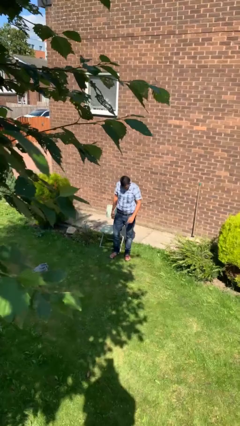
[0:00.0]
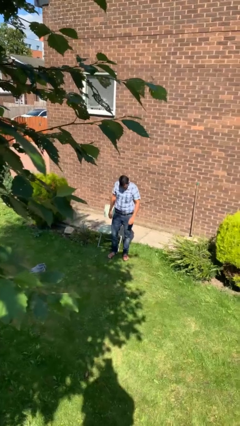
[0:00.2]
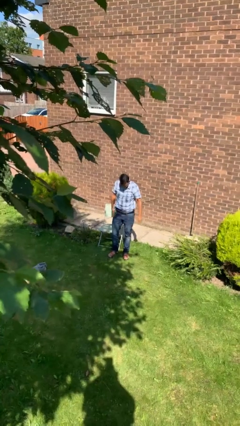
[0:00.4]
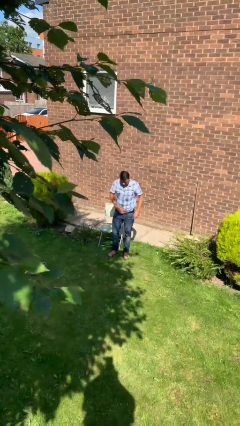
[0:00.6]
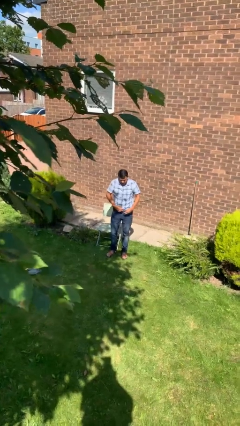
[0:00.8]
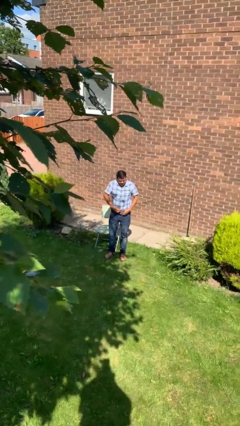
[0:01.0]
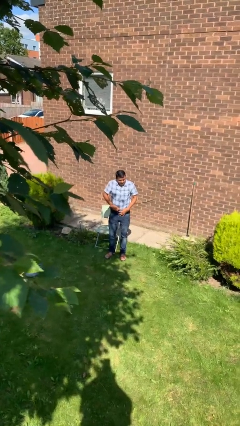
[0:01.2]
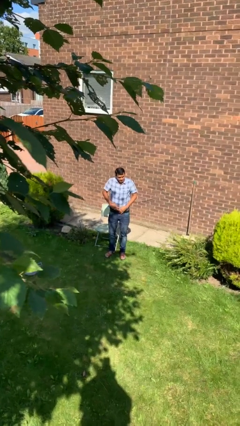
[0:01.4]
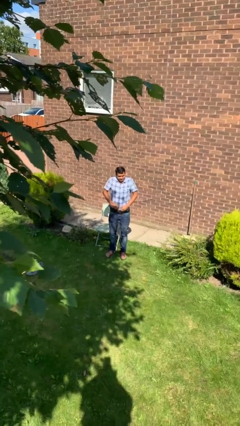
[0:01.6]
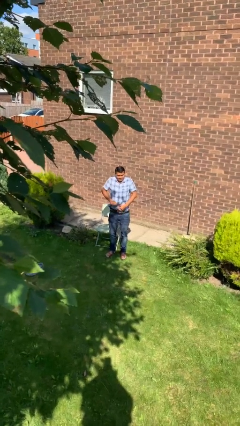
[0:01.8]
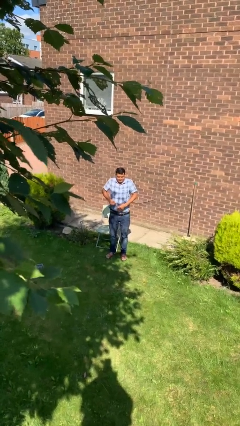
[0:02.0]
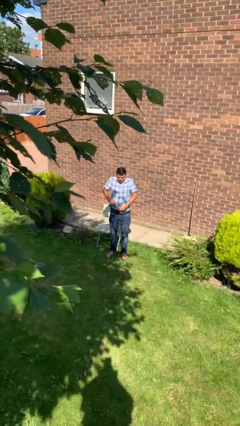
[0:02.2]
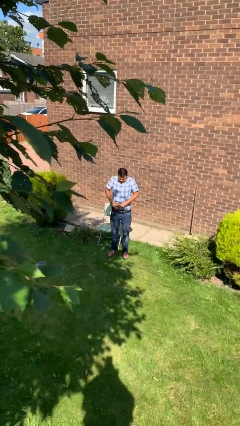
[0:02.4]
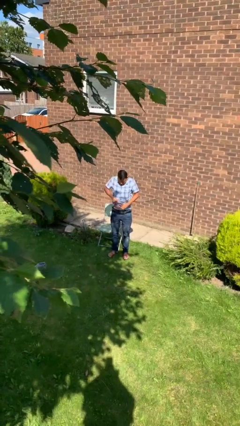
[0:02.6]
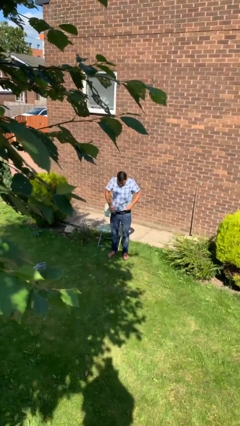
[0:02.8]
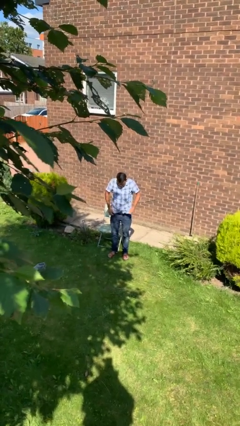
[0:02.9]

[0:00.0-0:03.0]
person untucks shirt

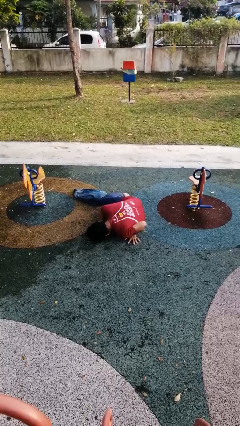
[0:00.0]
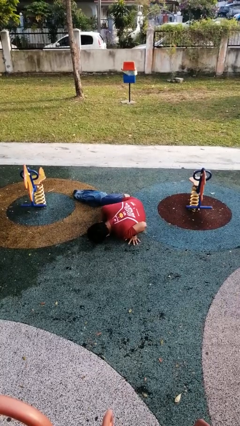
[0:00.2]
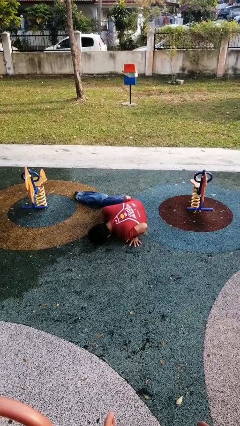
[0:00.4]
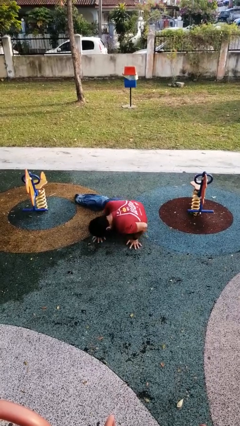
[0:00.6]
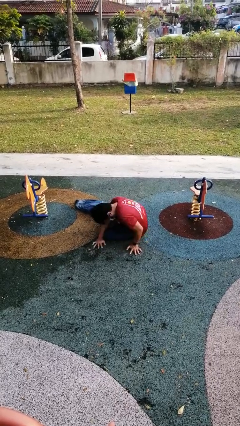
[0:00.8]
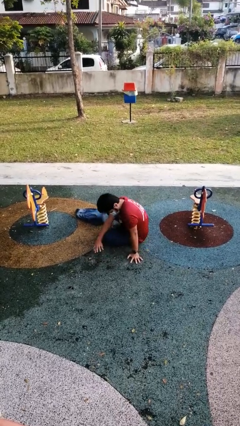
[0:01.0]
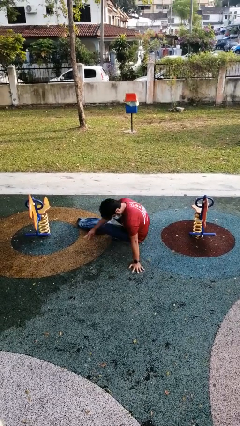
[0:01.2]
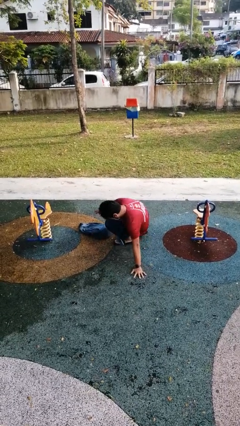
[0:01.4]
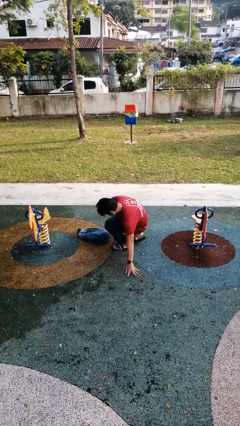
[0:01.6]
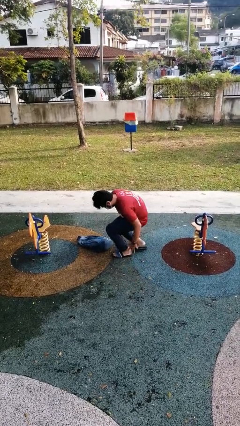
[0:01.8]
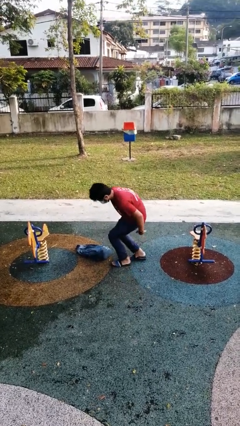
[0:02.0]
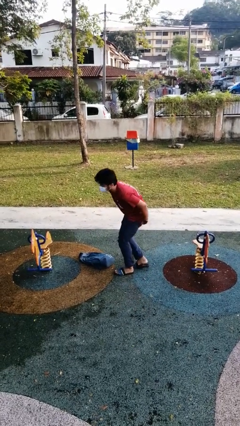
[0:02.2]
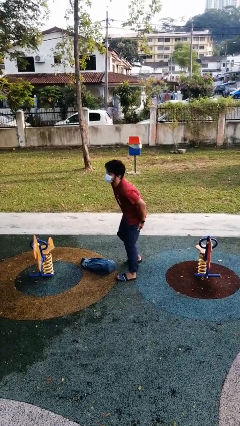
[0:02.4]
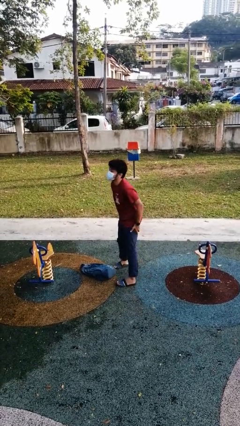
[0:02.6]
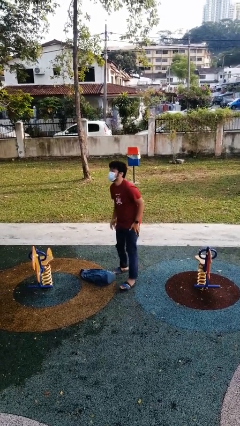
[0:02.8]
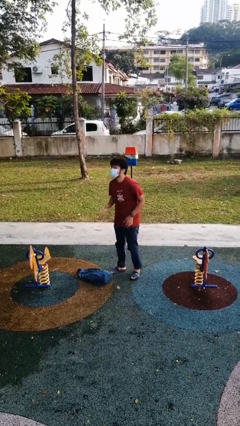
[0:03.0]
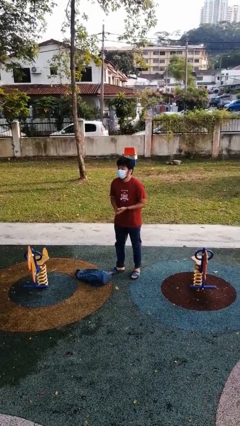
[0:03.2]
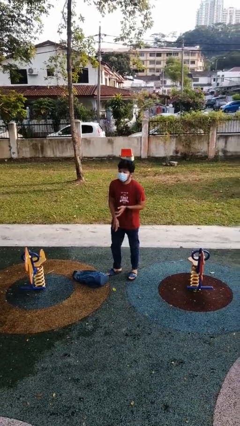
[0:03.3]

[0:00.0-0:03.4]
person stands up from floor

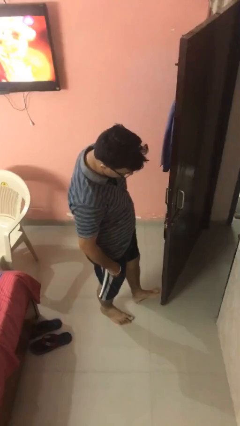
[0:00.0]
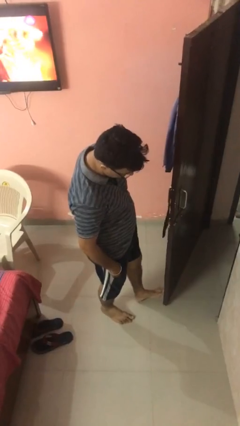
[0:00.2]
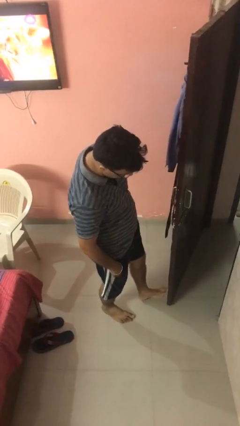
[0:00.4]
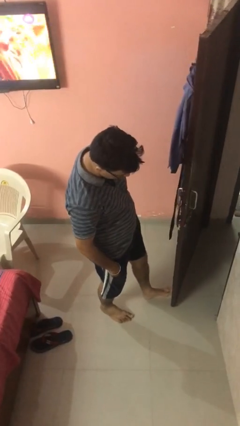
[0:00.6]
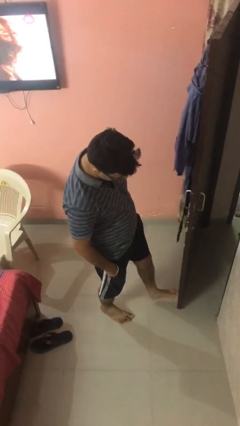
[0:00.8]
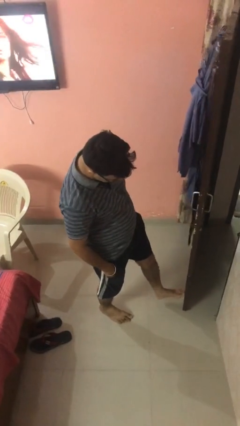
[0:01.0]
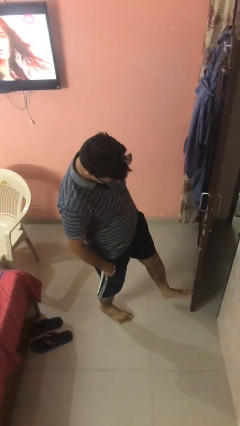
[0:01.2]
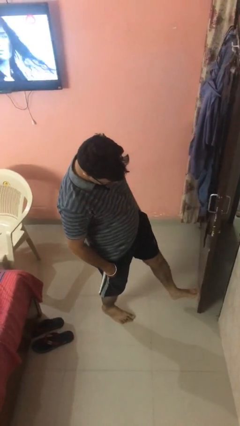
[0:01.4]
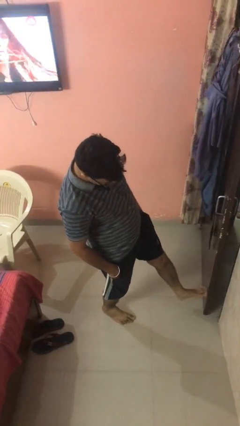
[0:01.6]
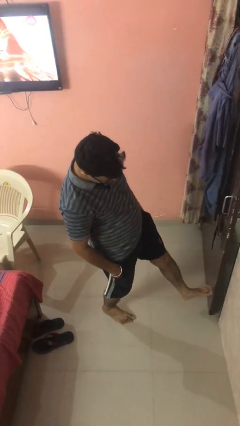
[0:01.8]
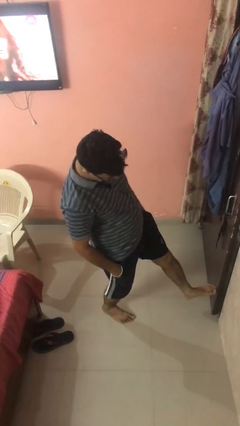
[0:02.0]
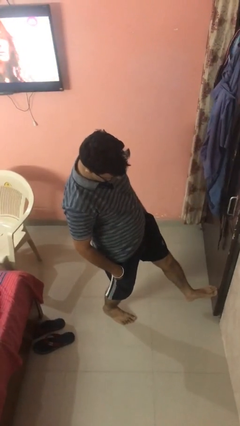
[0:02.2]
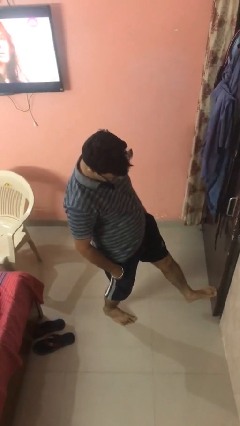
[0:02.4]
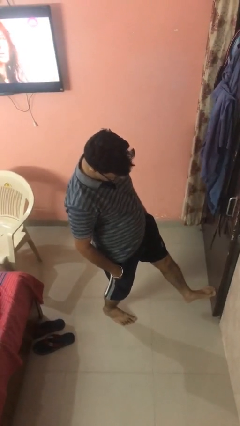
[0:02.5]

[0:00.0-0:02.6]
person closes door with foot

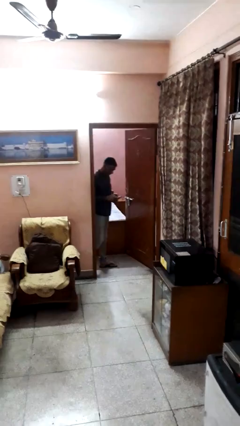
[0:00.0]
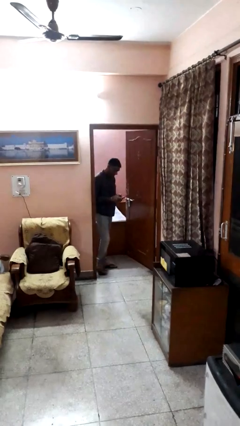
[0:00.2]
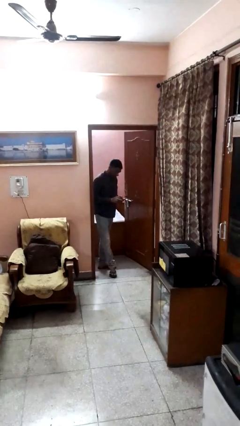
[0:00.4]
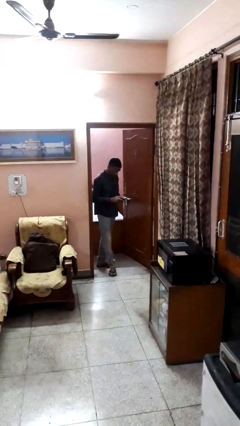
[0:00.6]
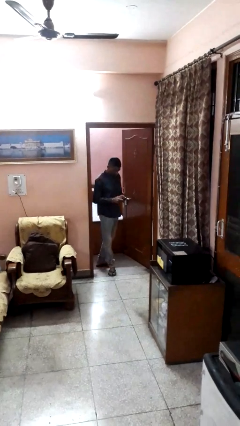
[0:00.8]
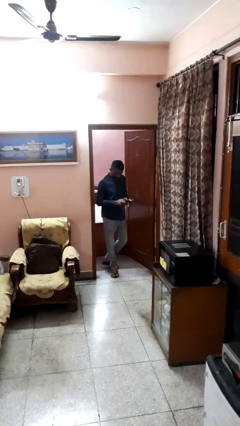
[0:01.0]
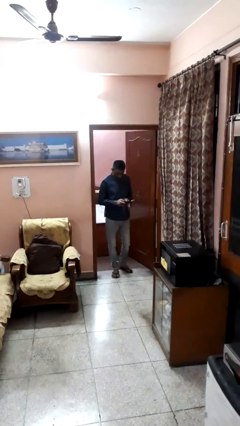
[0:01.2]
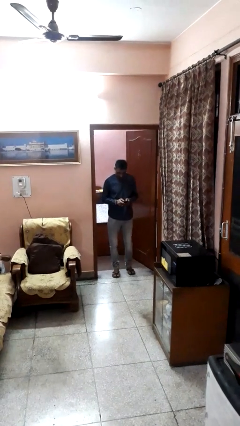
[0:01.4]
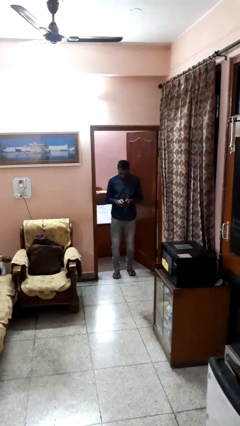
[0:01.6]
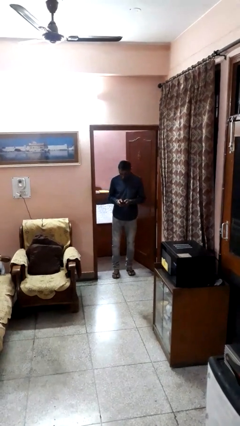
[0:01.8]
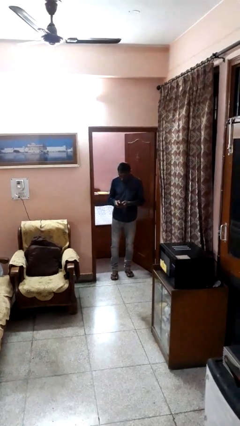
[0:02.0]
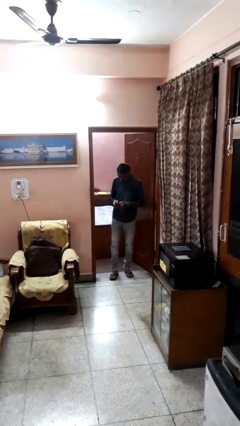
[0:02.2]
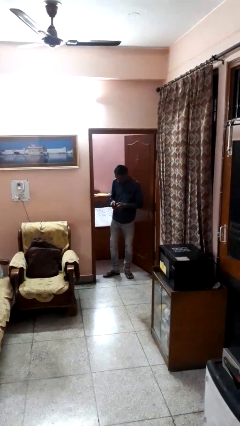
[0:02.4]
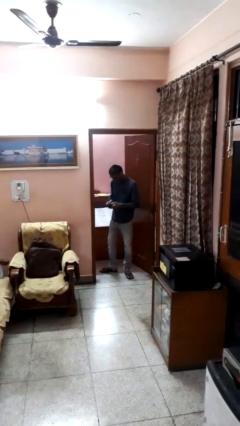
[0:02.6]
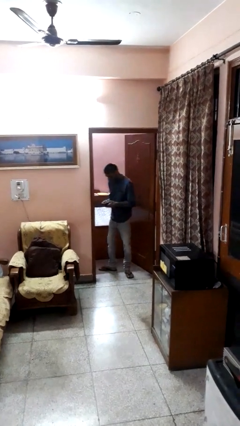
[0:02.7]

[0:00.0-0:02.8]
person enters scene through structure

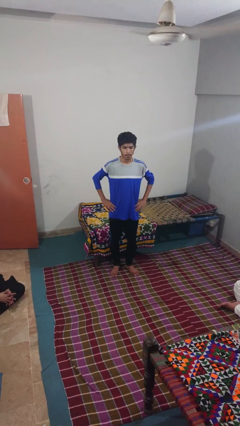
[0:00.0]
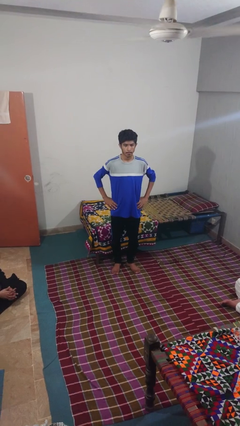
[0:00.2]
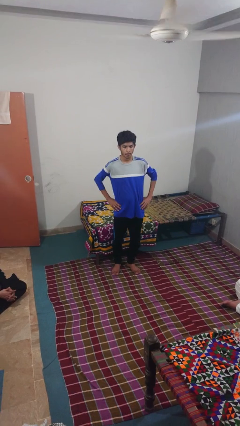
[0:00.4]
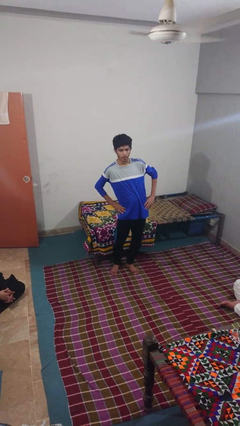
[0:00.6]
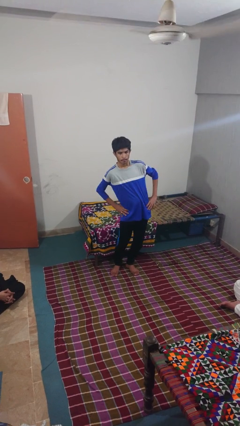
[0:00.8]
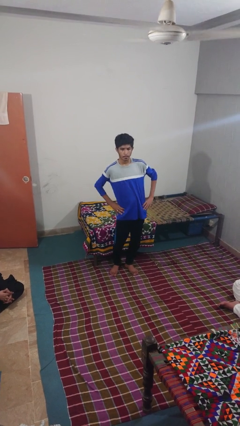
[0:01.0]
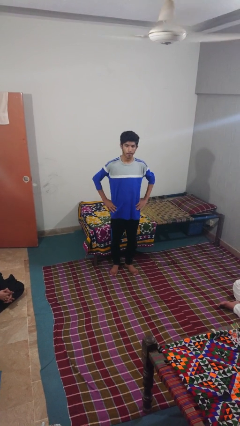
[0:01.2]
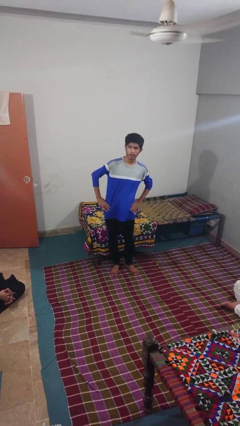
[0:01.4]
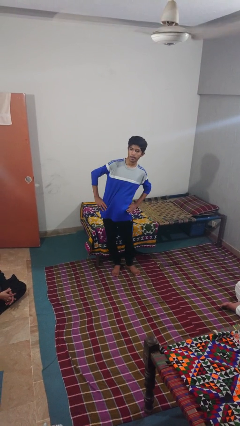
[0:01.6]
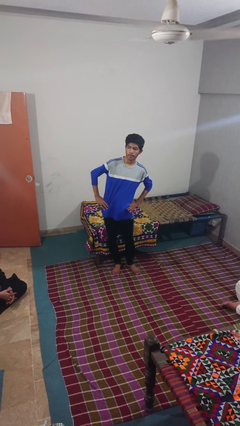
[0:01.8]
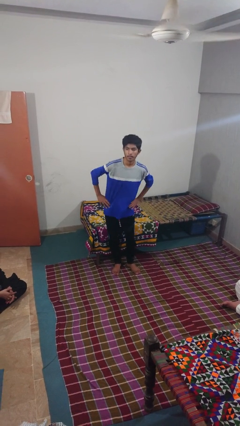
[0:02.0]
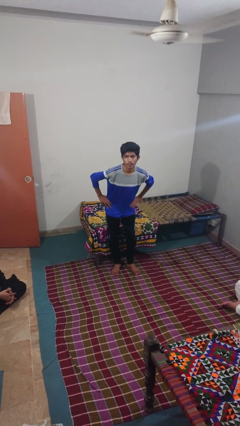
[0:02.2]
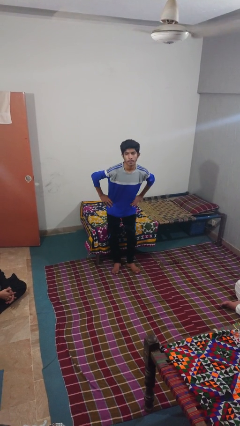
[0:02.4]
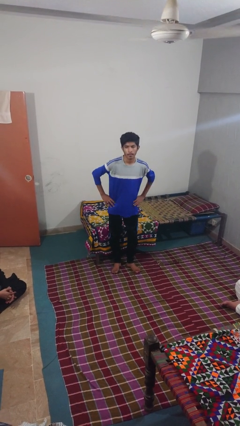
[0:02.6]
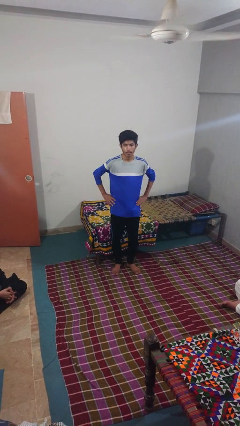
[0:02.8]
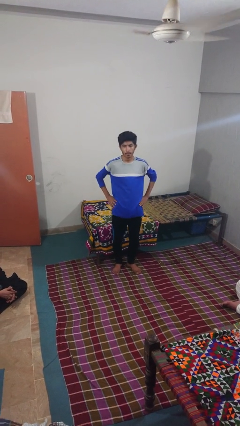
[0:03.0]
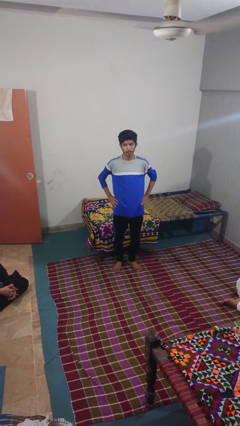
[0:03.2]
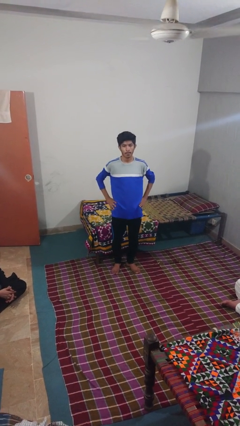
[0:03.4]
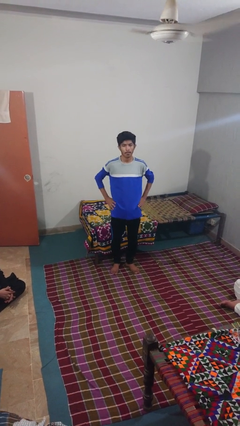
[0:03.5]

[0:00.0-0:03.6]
person wiggles hips

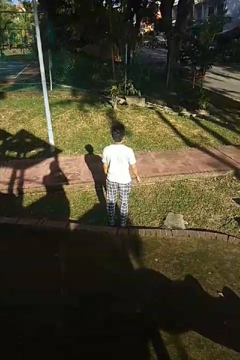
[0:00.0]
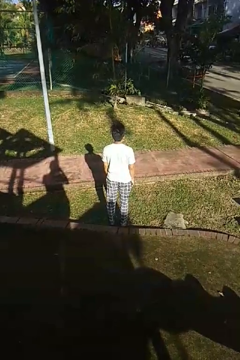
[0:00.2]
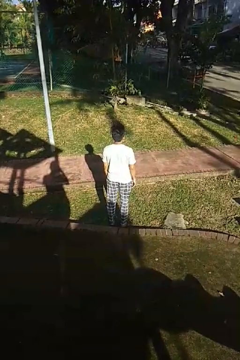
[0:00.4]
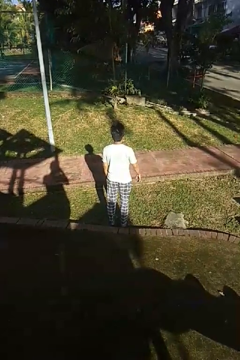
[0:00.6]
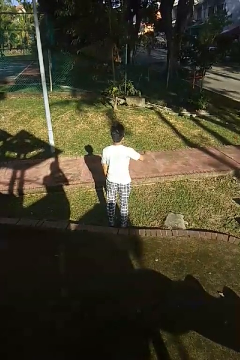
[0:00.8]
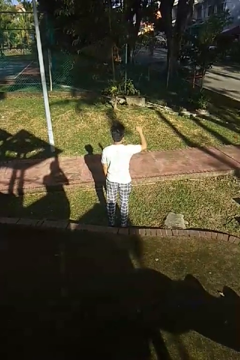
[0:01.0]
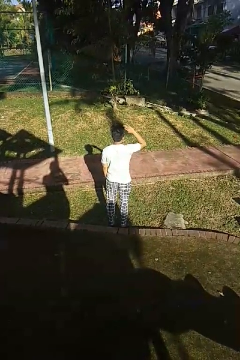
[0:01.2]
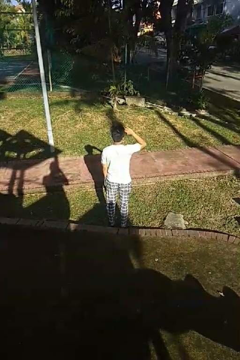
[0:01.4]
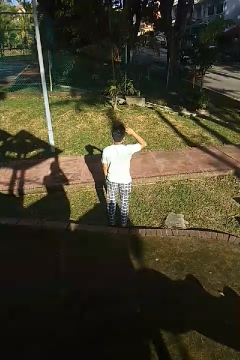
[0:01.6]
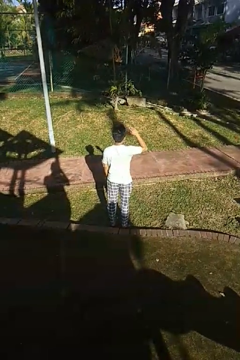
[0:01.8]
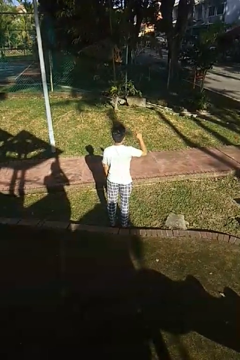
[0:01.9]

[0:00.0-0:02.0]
person salutes

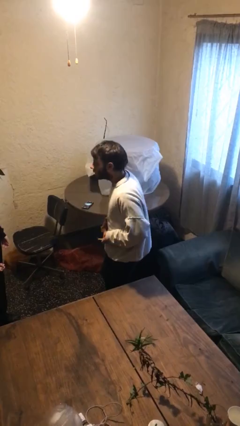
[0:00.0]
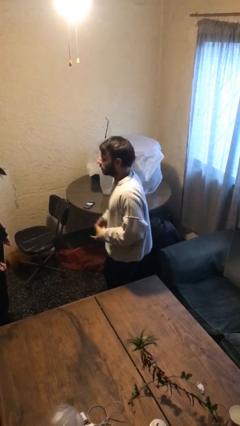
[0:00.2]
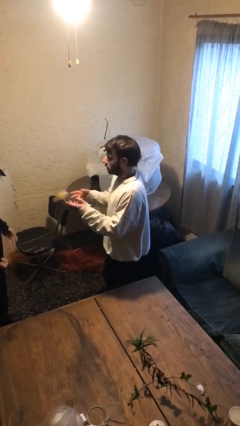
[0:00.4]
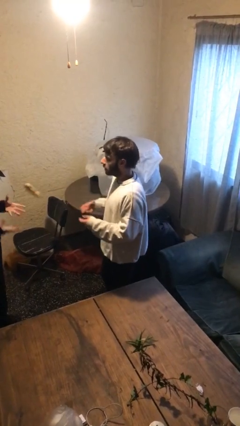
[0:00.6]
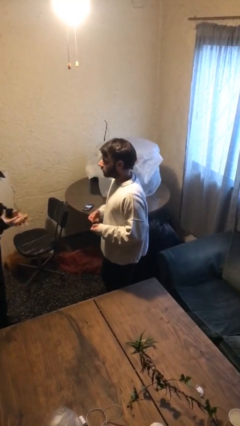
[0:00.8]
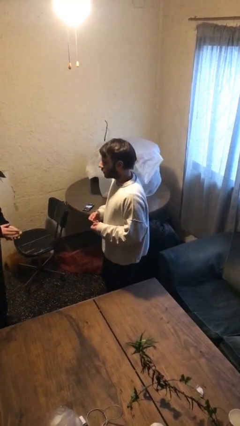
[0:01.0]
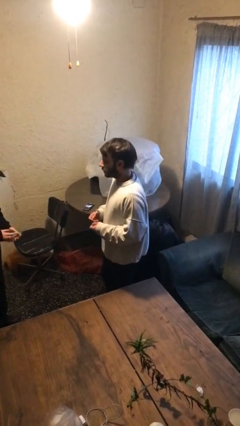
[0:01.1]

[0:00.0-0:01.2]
person throws object to person
